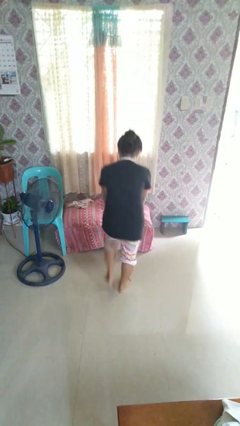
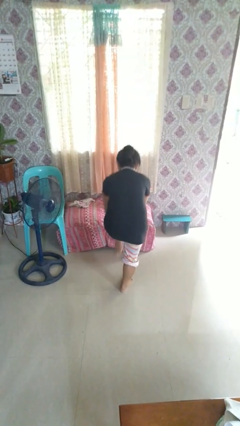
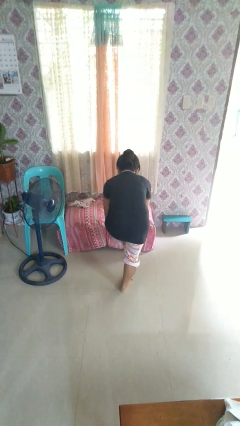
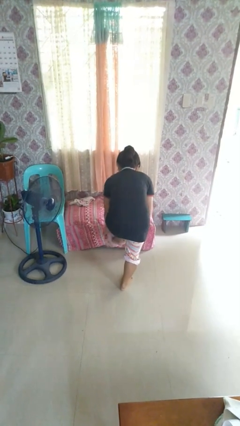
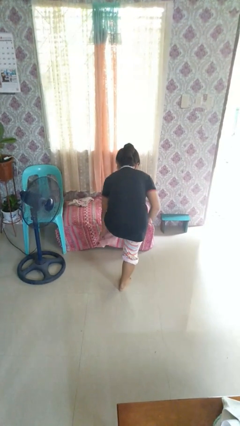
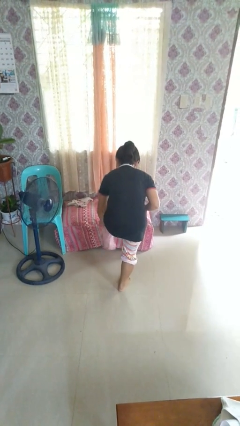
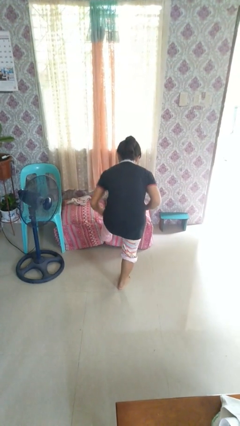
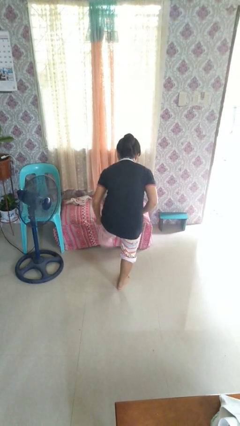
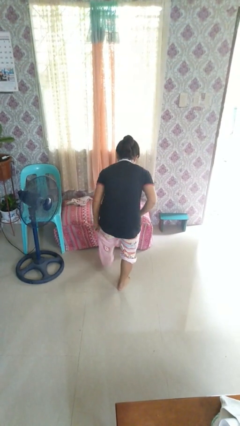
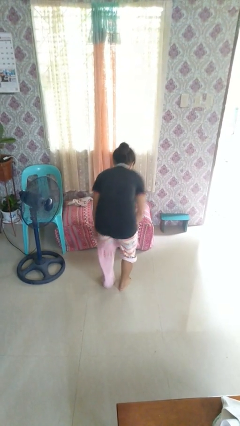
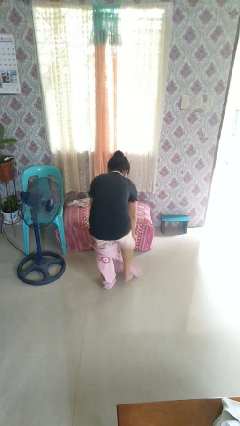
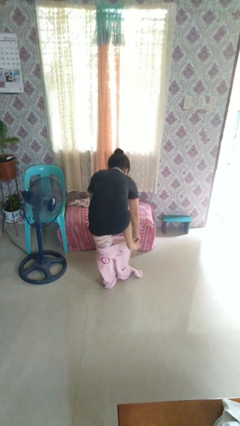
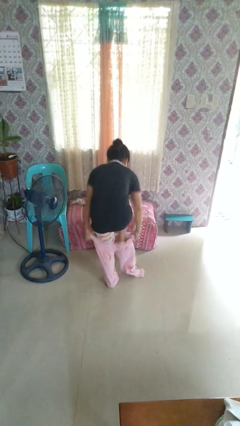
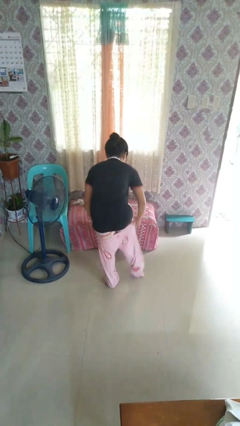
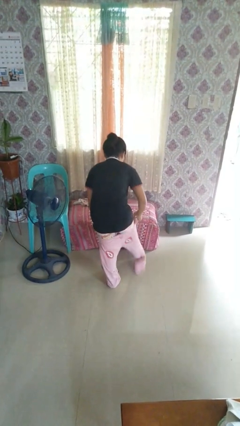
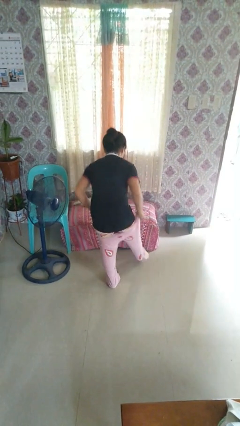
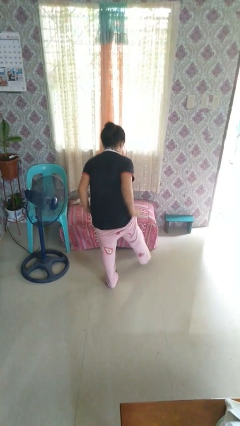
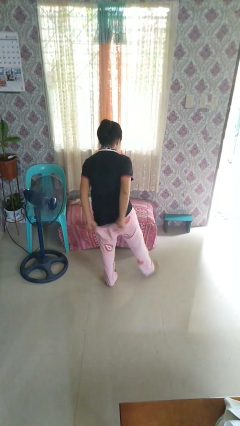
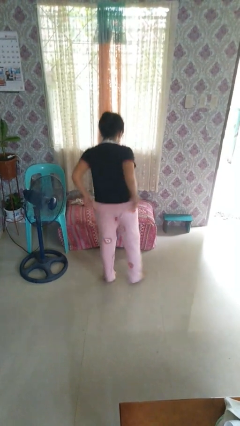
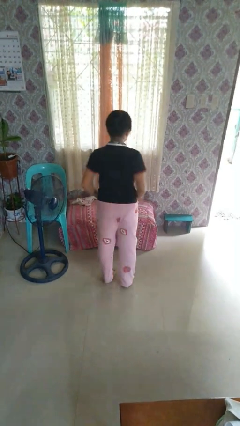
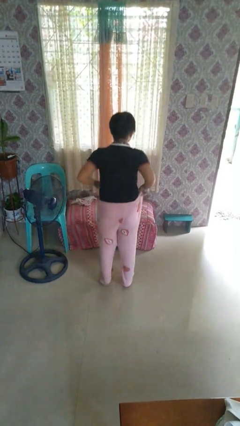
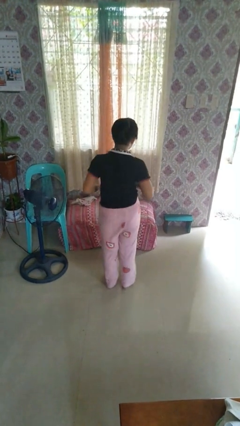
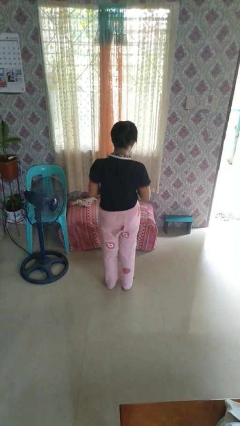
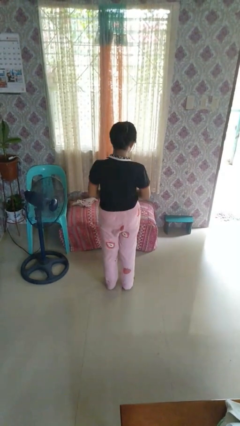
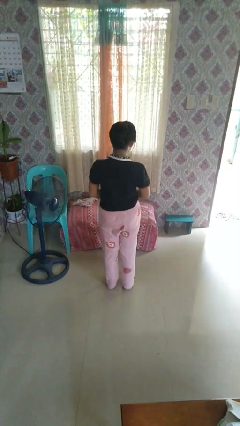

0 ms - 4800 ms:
person puts on pants

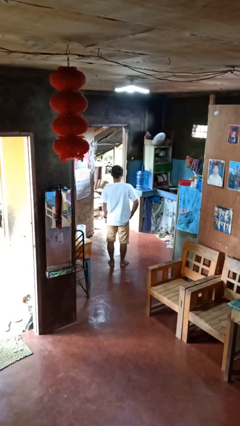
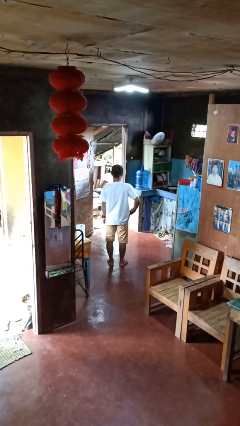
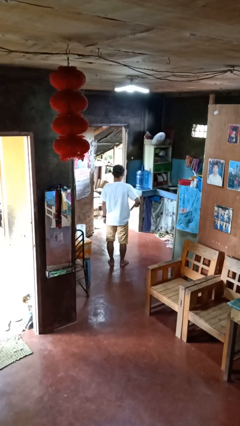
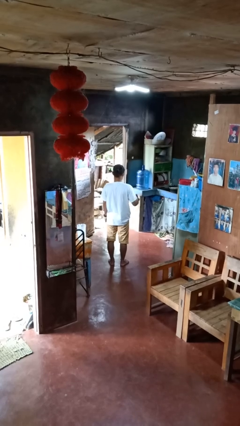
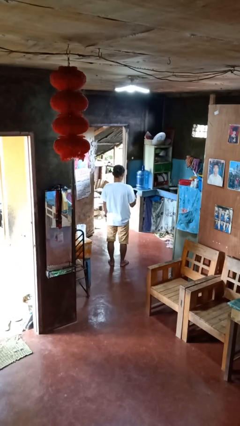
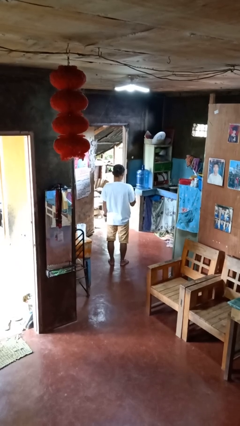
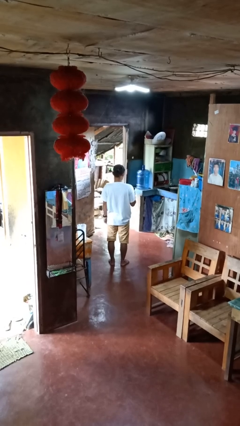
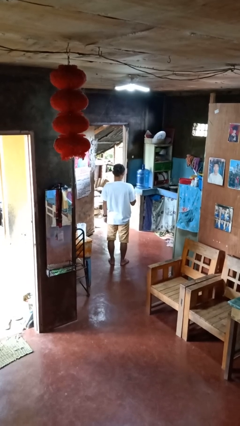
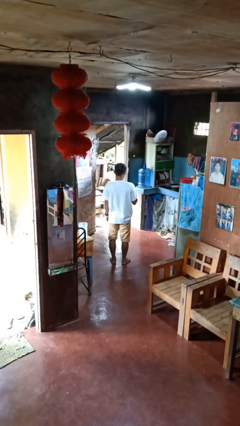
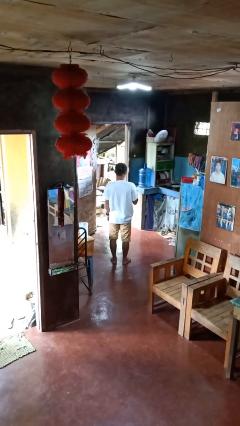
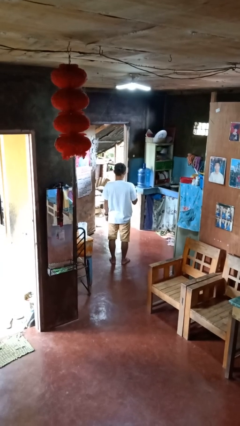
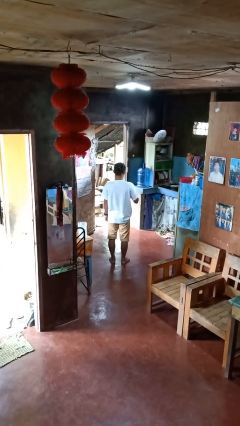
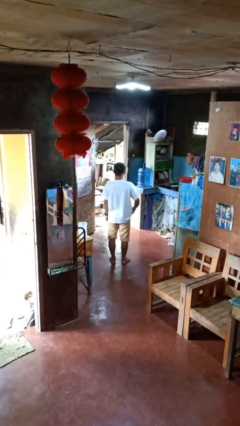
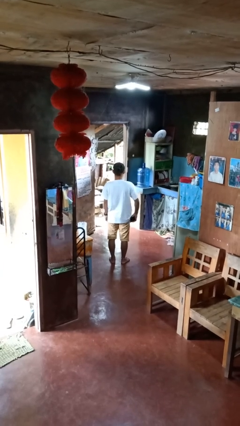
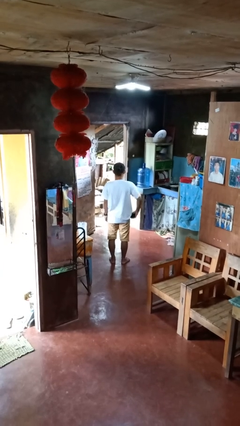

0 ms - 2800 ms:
person takes phone from pocket

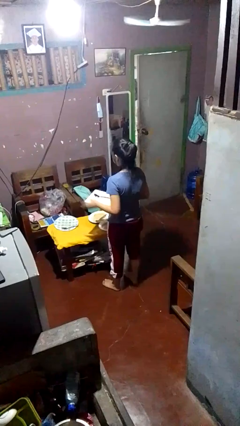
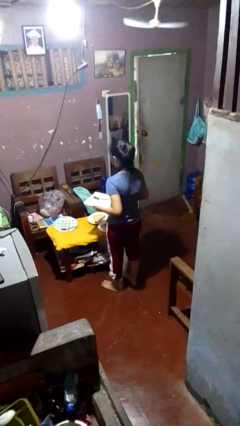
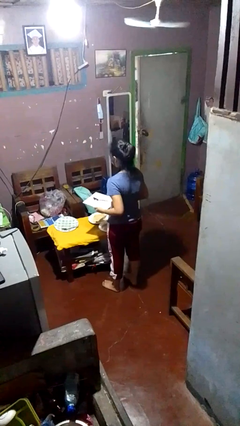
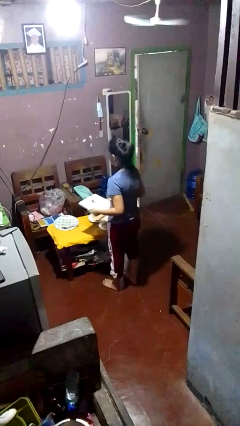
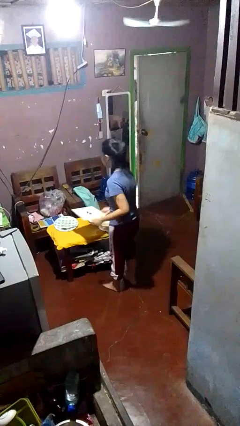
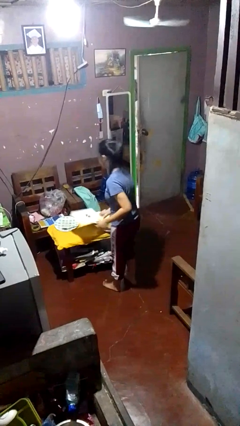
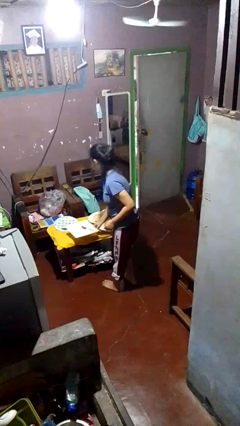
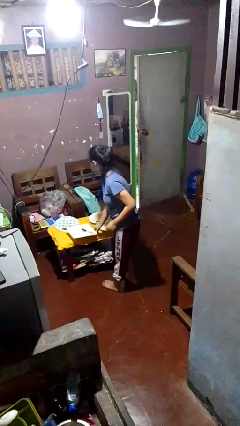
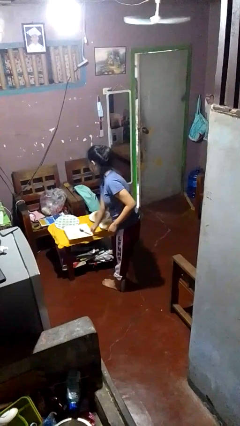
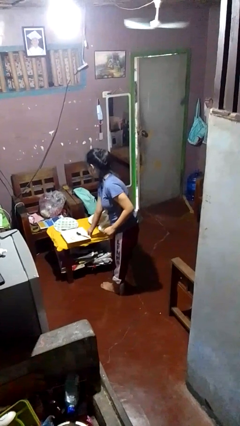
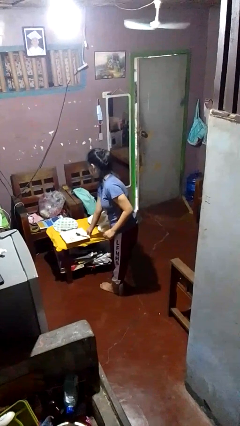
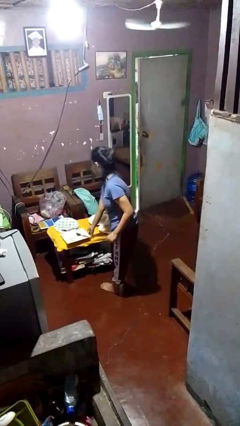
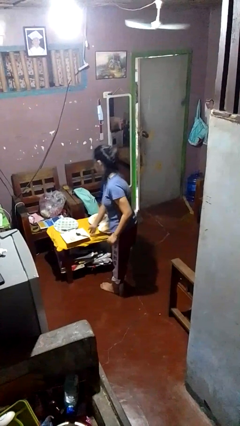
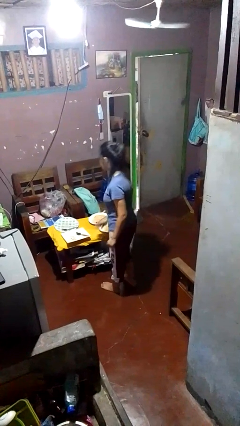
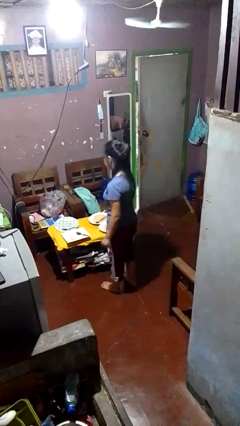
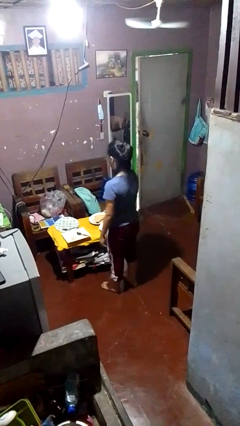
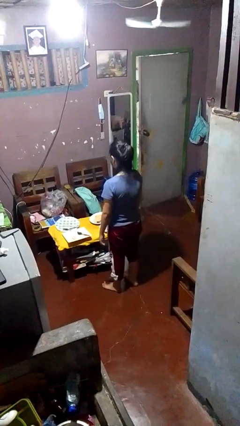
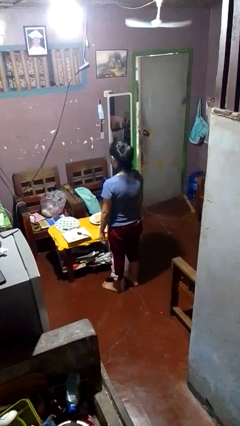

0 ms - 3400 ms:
person sets table

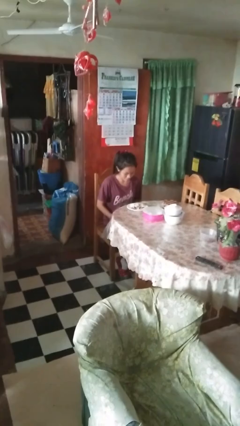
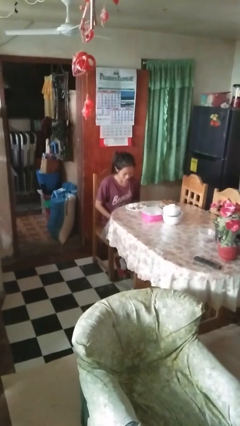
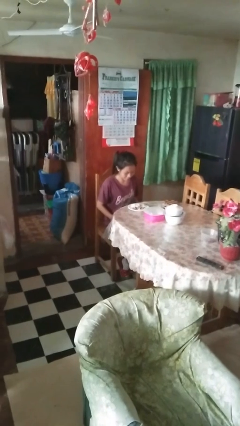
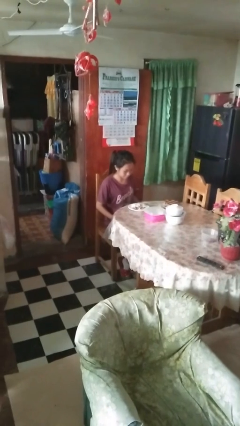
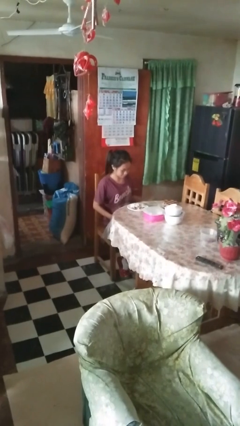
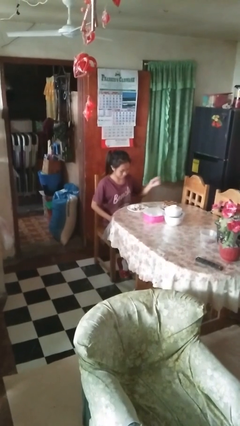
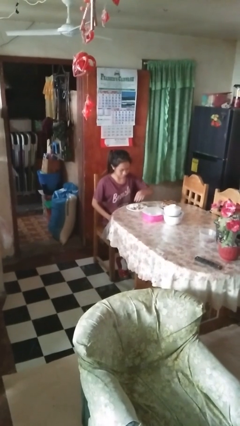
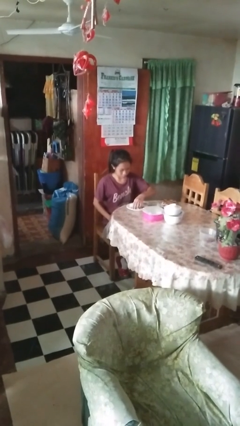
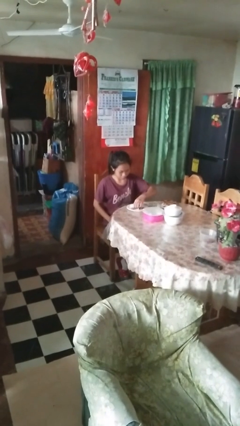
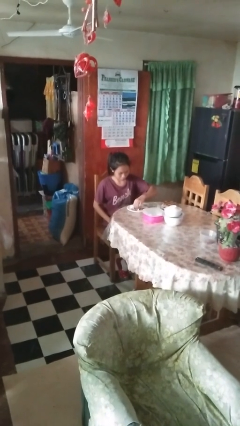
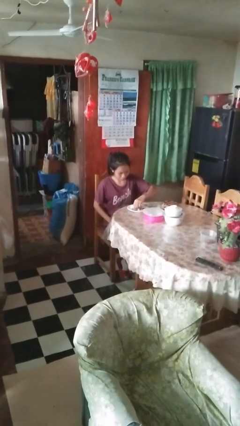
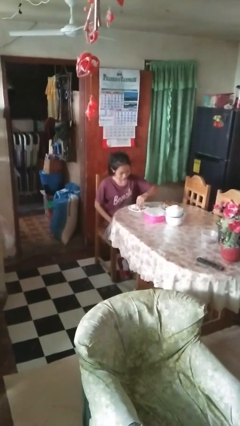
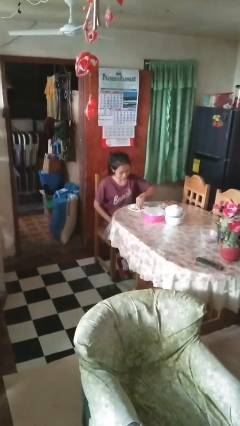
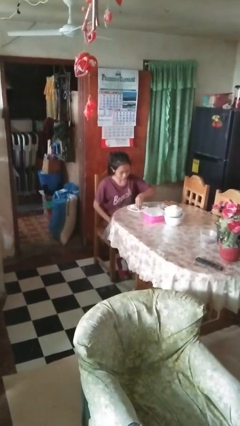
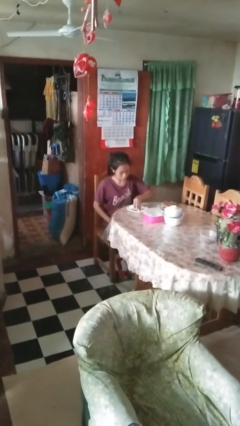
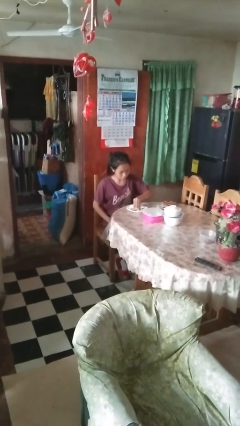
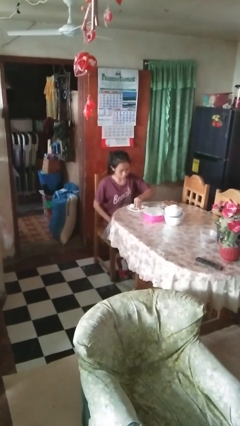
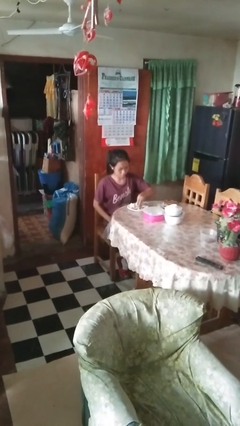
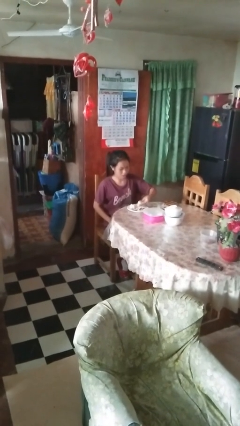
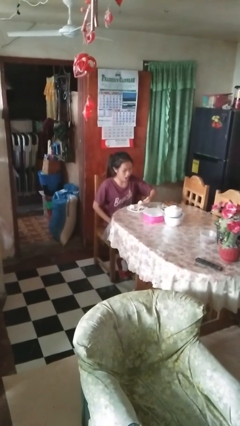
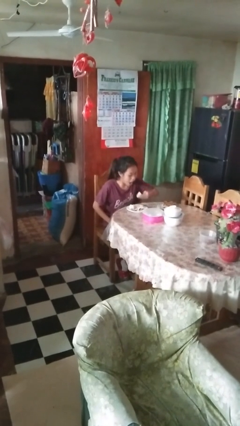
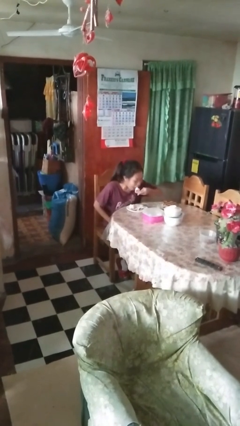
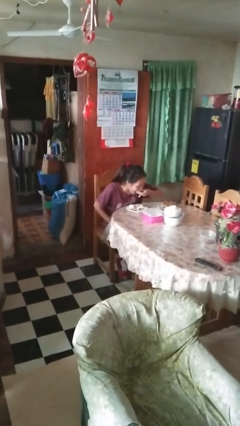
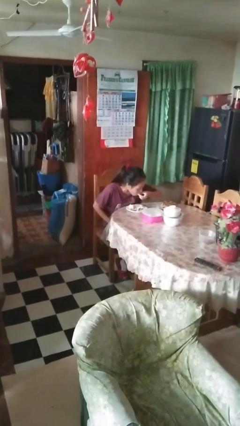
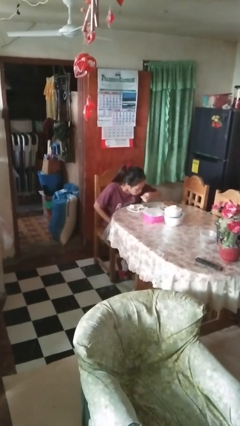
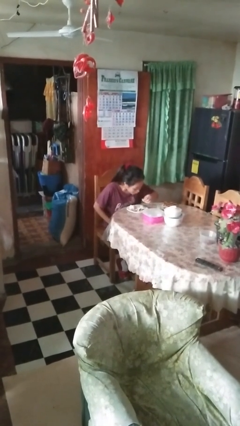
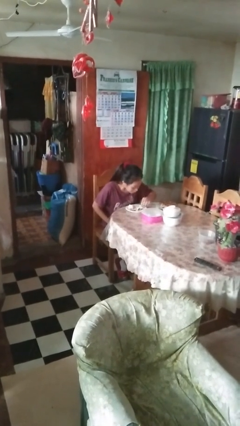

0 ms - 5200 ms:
person eats with hands

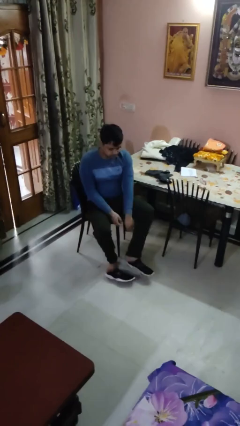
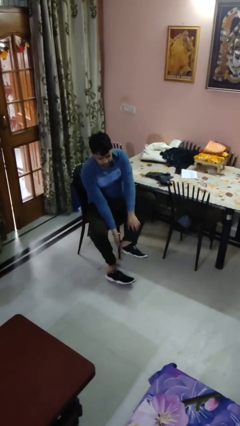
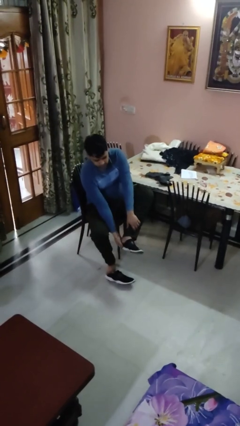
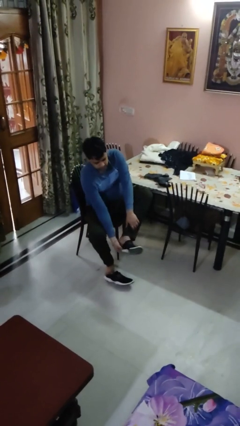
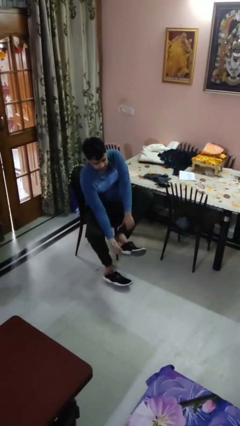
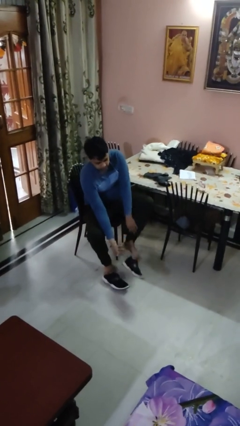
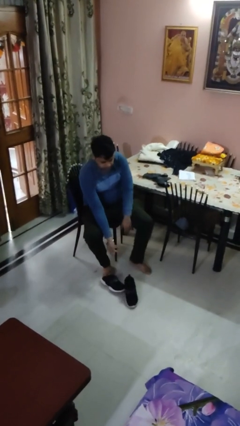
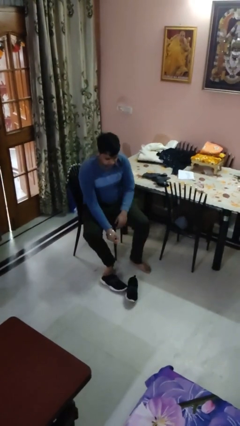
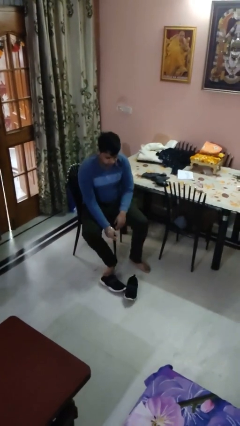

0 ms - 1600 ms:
person takes off shoes
